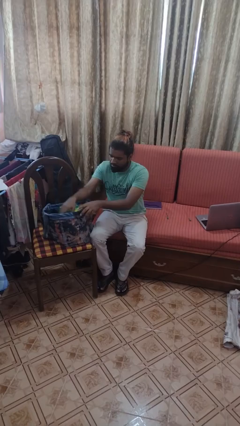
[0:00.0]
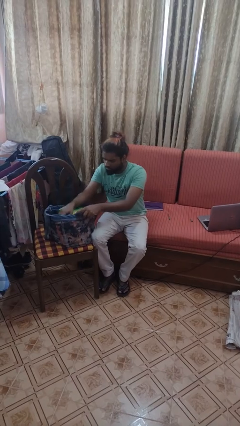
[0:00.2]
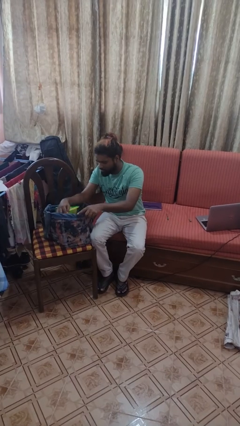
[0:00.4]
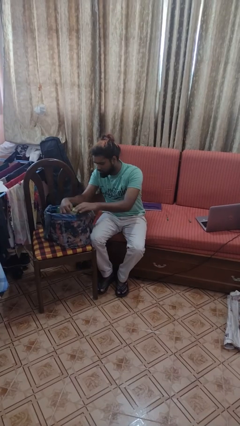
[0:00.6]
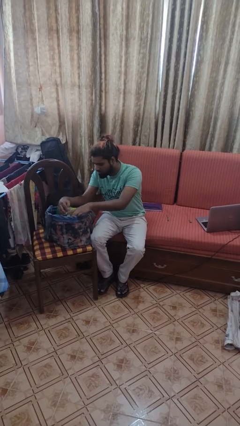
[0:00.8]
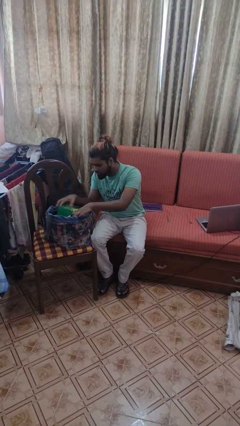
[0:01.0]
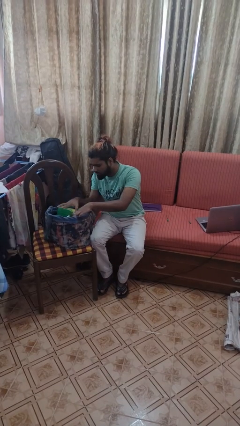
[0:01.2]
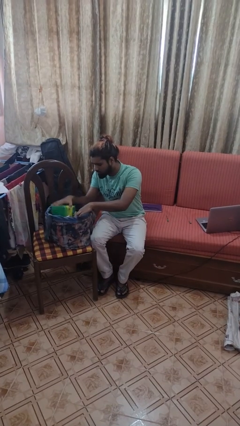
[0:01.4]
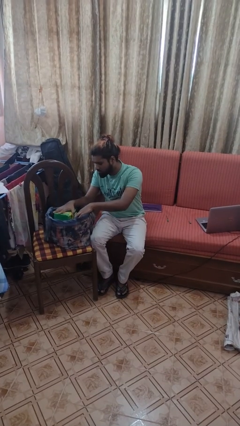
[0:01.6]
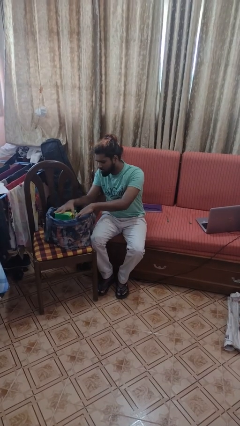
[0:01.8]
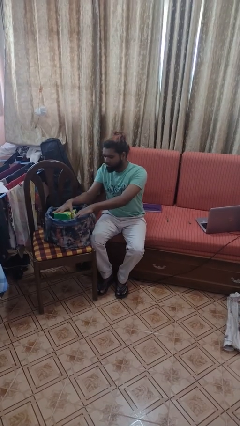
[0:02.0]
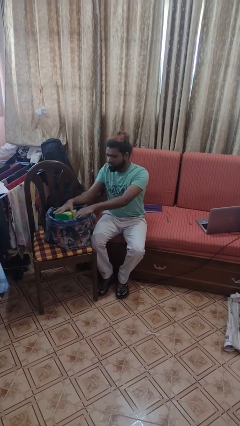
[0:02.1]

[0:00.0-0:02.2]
person searches in bag

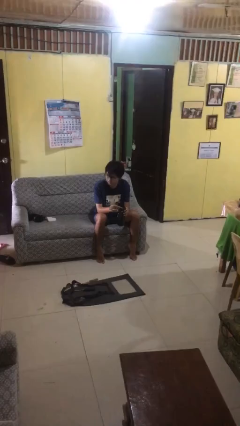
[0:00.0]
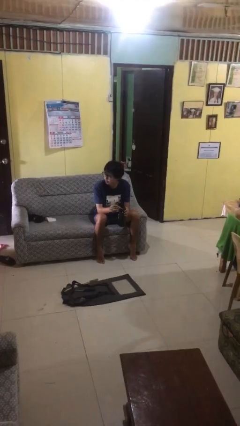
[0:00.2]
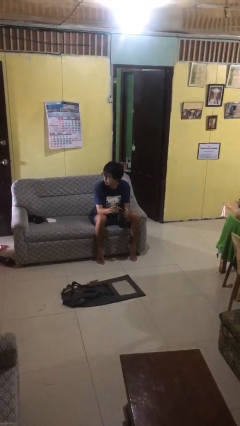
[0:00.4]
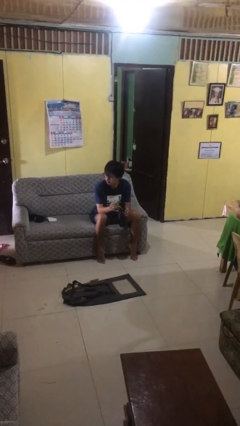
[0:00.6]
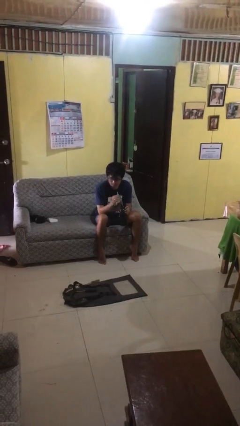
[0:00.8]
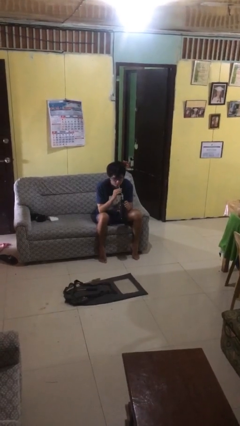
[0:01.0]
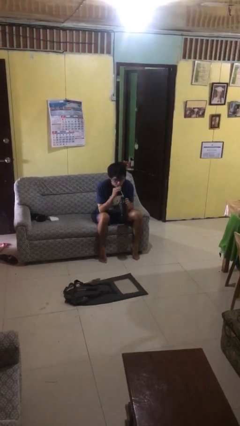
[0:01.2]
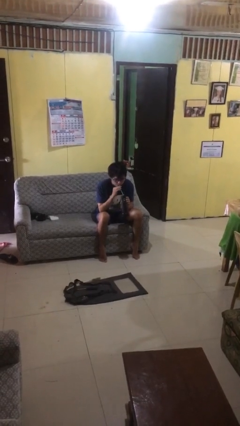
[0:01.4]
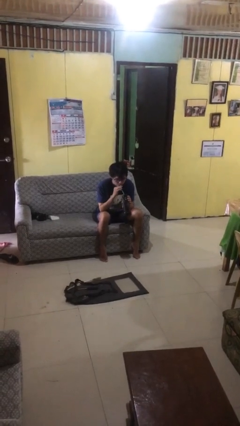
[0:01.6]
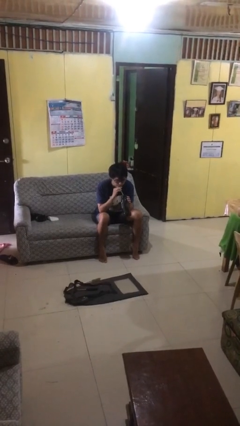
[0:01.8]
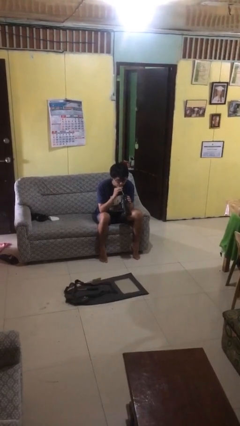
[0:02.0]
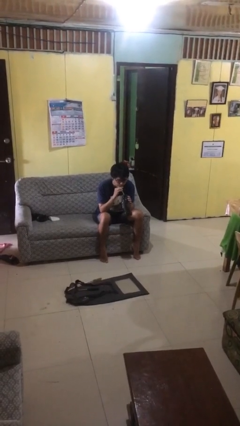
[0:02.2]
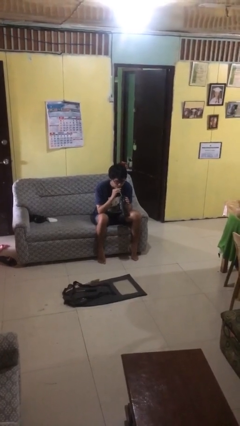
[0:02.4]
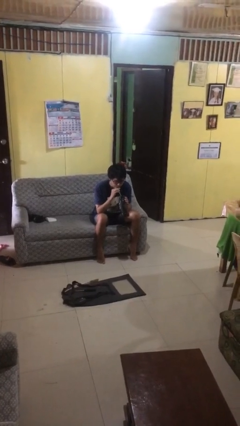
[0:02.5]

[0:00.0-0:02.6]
person drinks from straw

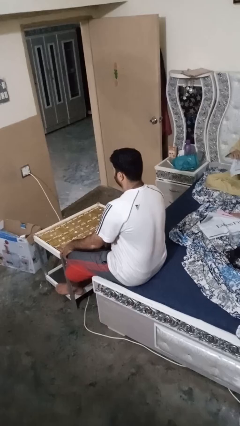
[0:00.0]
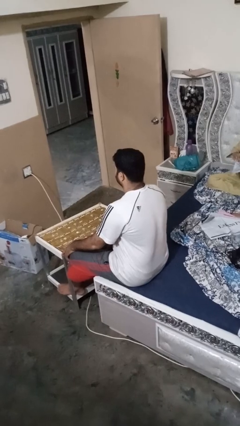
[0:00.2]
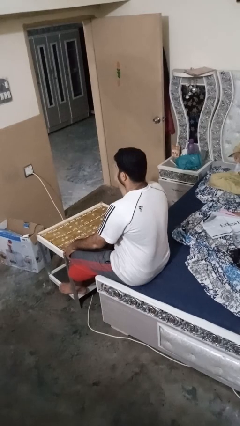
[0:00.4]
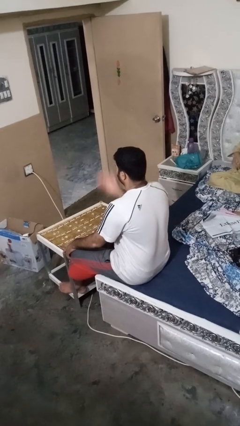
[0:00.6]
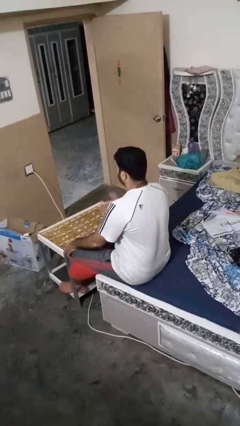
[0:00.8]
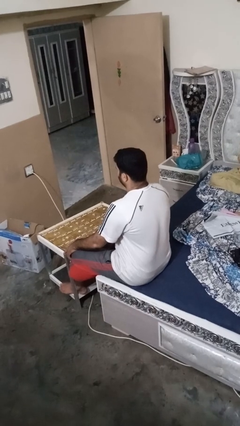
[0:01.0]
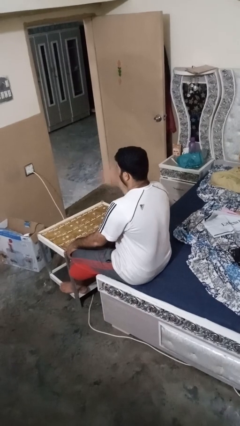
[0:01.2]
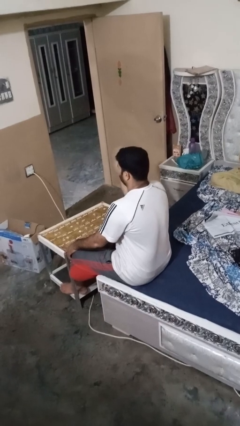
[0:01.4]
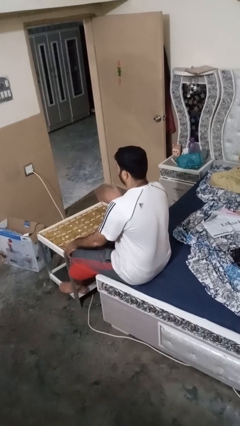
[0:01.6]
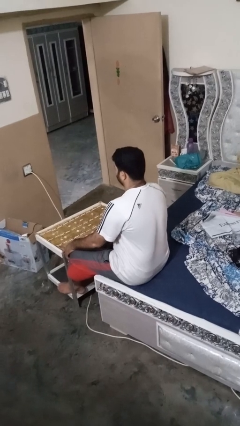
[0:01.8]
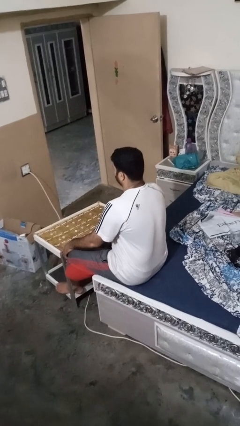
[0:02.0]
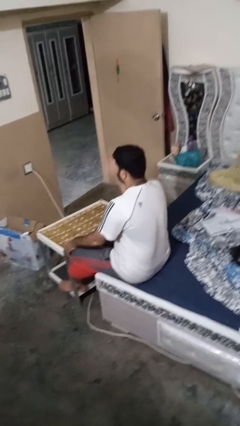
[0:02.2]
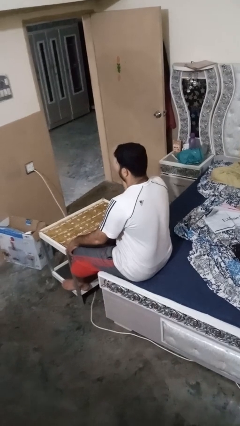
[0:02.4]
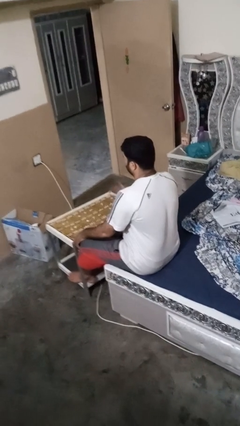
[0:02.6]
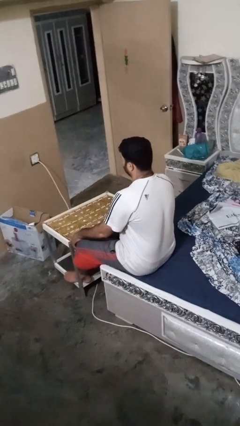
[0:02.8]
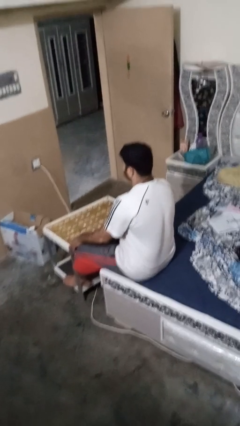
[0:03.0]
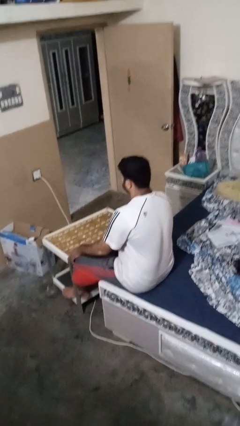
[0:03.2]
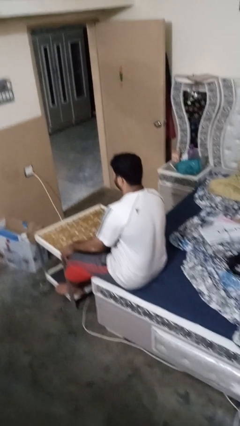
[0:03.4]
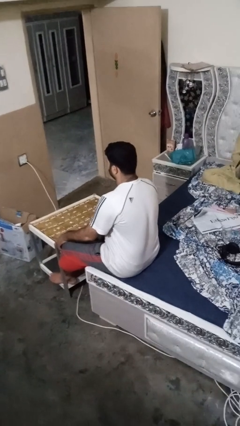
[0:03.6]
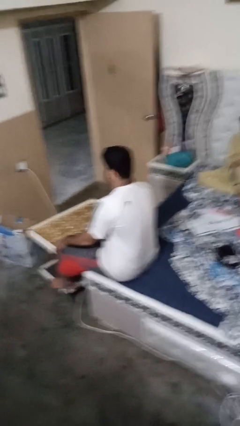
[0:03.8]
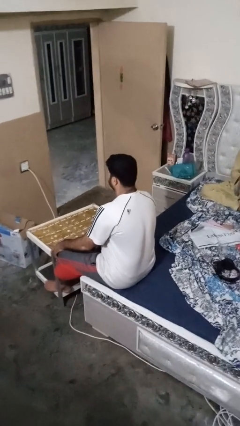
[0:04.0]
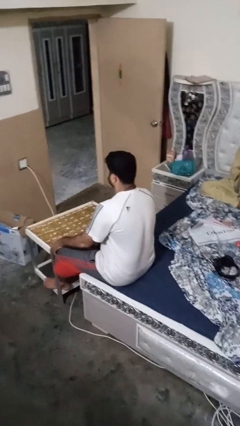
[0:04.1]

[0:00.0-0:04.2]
person drums on chest

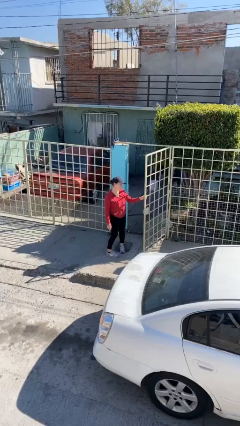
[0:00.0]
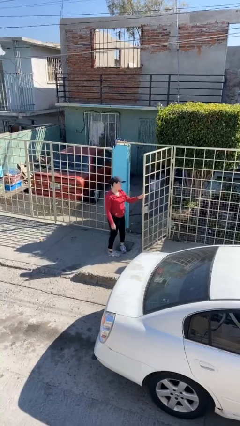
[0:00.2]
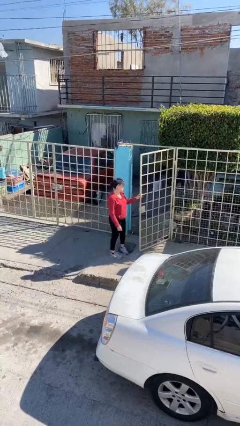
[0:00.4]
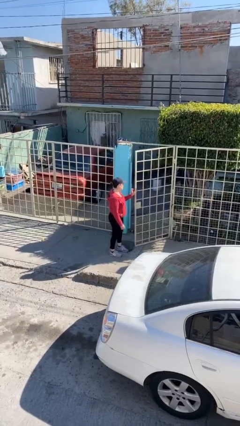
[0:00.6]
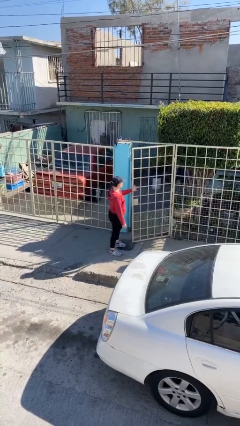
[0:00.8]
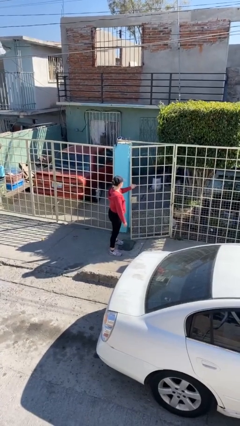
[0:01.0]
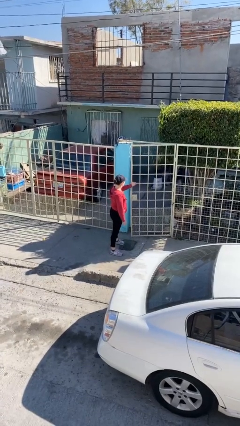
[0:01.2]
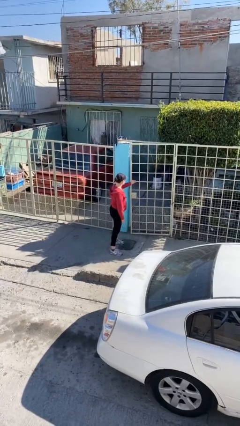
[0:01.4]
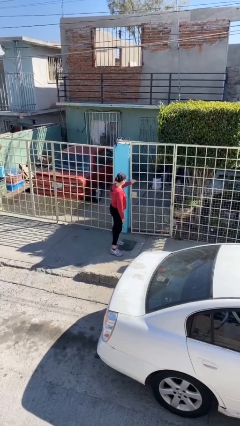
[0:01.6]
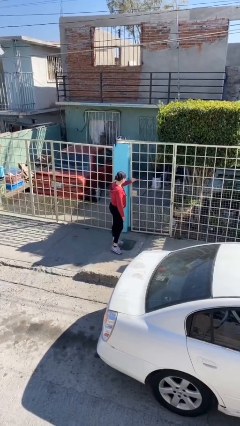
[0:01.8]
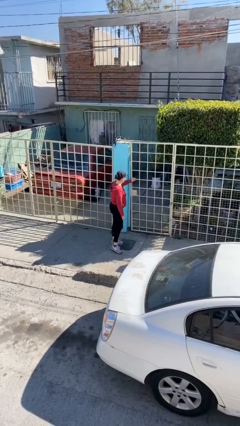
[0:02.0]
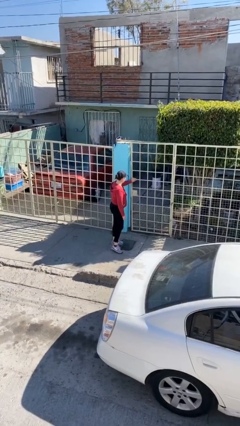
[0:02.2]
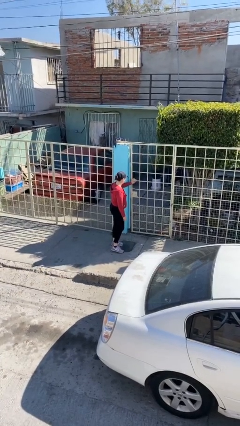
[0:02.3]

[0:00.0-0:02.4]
person closes facility door

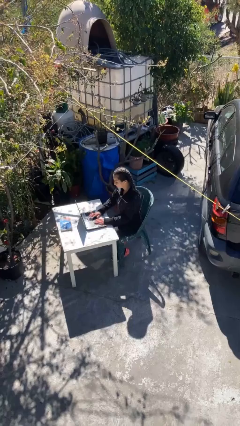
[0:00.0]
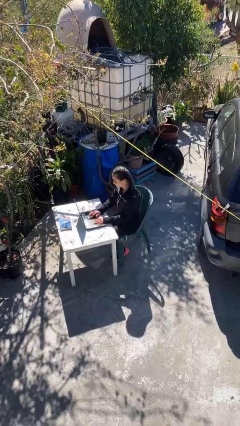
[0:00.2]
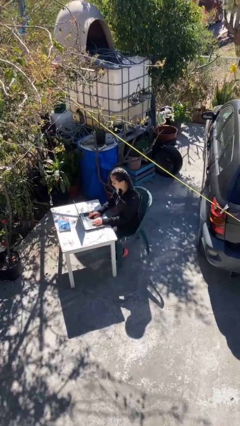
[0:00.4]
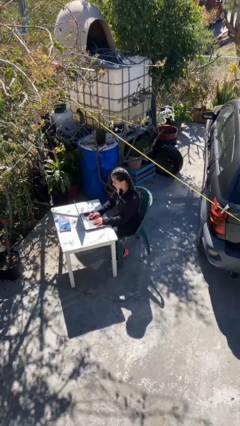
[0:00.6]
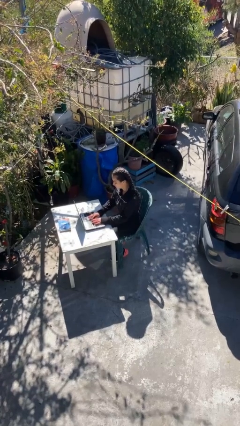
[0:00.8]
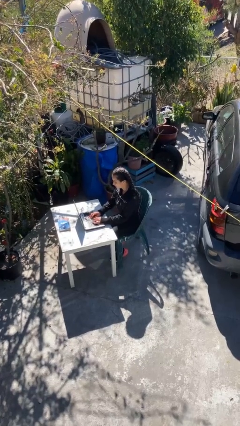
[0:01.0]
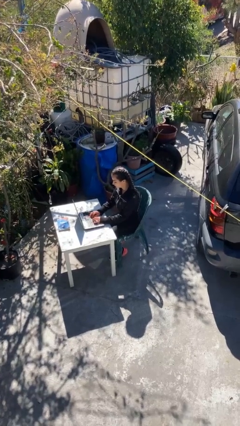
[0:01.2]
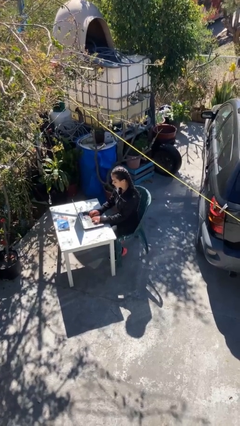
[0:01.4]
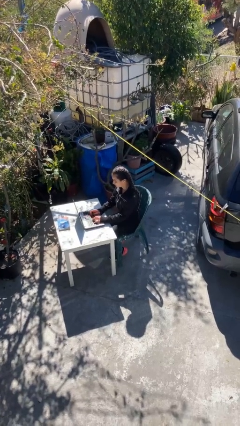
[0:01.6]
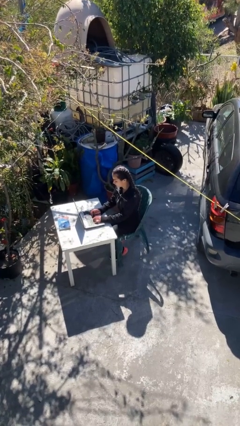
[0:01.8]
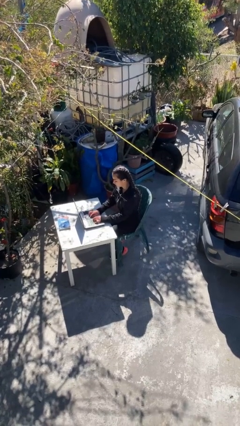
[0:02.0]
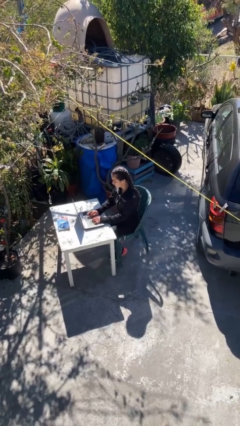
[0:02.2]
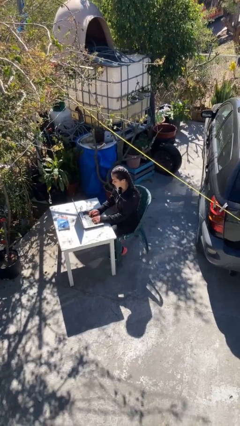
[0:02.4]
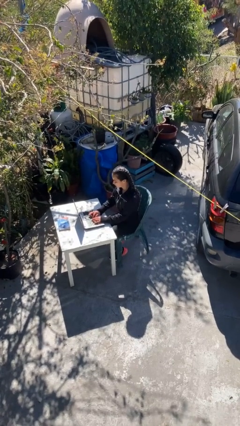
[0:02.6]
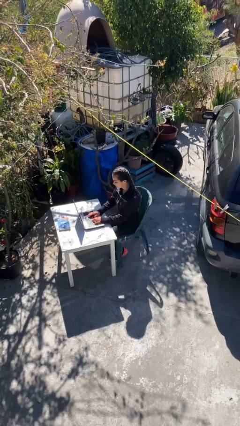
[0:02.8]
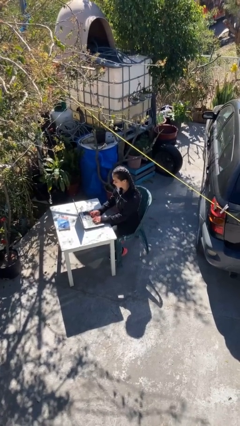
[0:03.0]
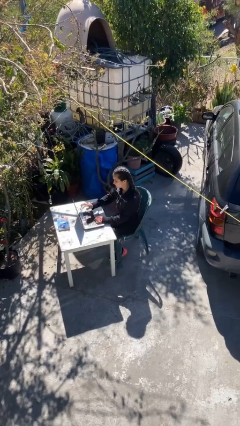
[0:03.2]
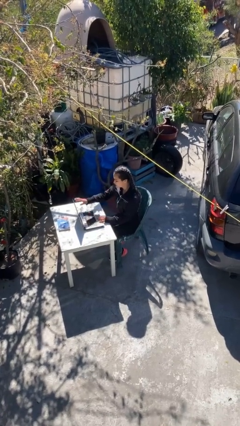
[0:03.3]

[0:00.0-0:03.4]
person interacts with laptop

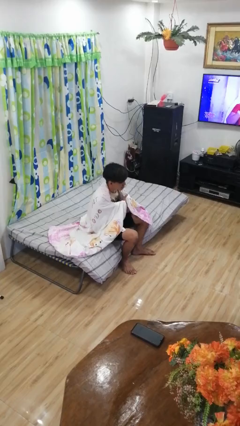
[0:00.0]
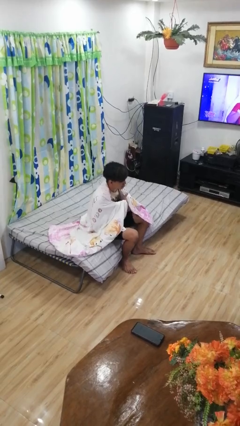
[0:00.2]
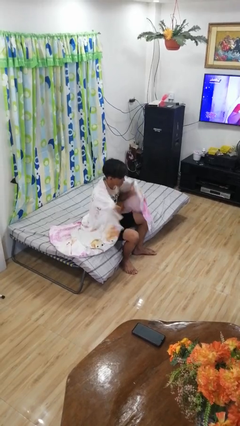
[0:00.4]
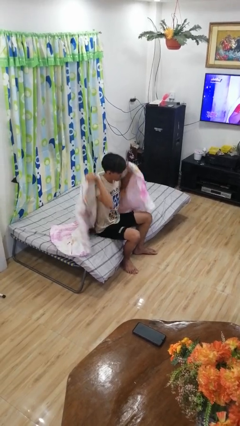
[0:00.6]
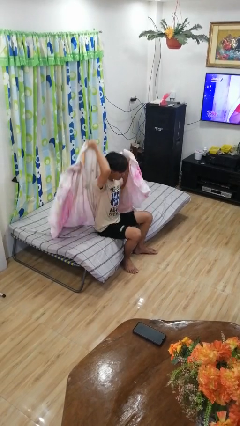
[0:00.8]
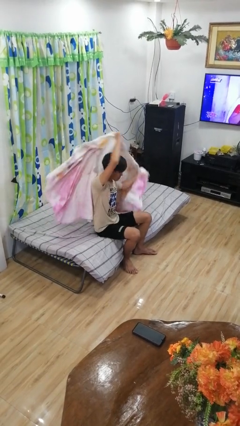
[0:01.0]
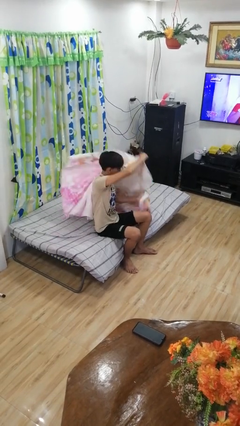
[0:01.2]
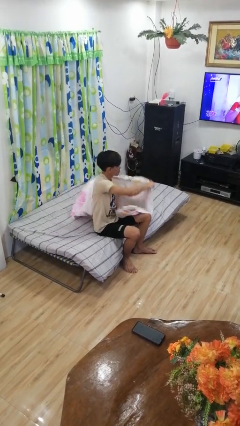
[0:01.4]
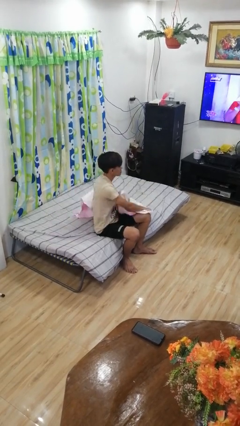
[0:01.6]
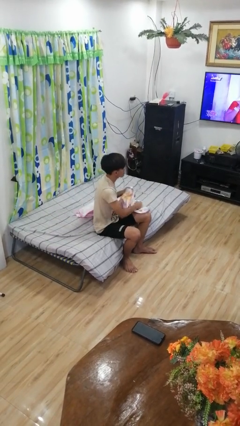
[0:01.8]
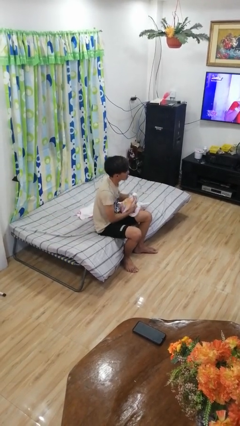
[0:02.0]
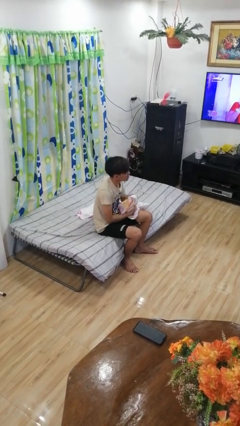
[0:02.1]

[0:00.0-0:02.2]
person uncovers with blanket

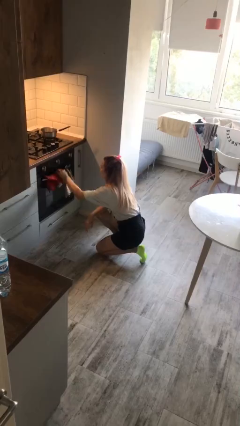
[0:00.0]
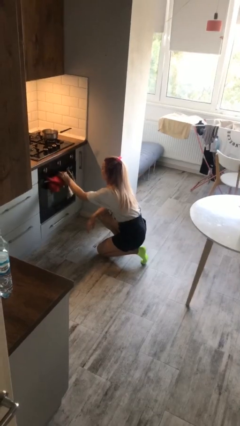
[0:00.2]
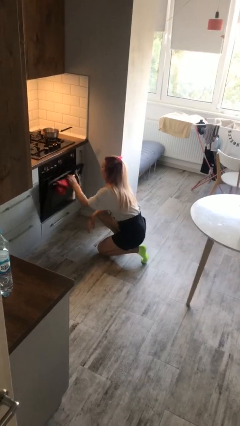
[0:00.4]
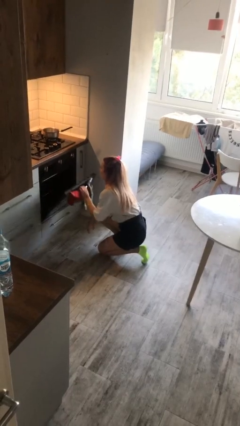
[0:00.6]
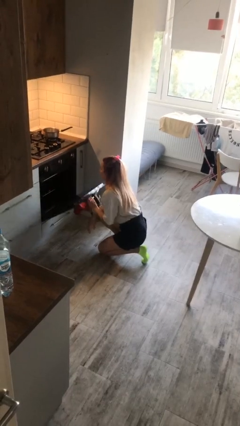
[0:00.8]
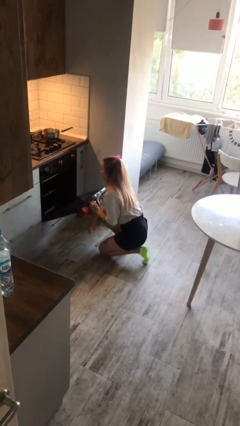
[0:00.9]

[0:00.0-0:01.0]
person opens oven door
